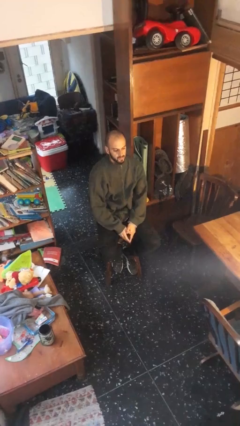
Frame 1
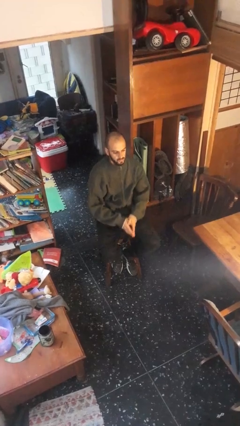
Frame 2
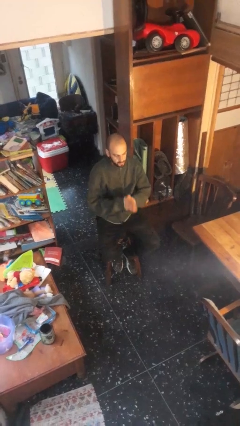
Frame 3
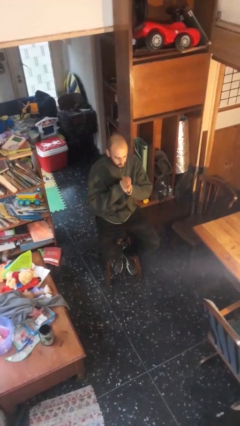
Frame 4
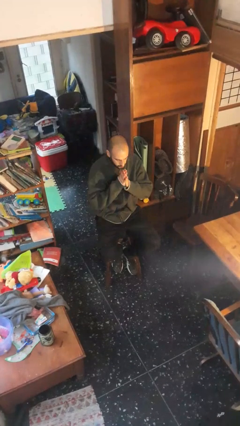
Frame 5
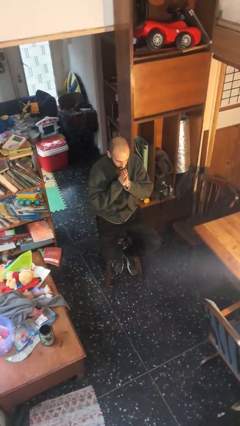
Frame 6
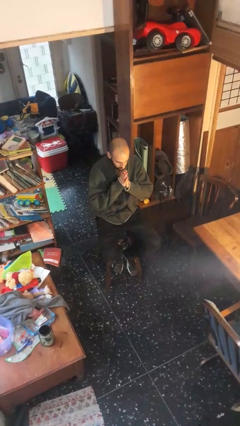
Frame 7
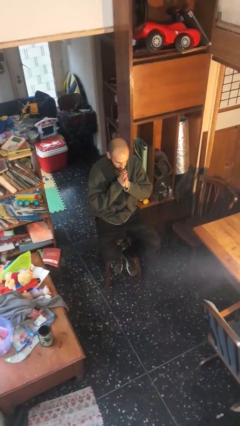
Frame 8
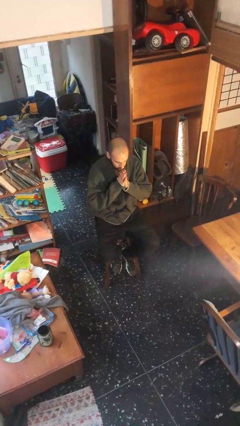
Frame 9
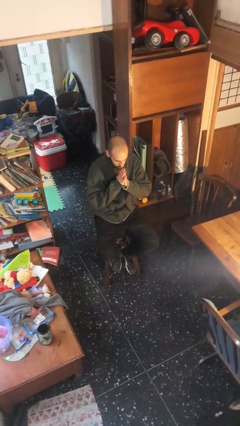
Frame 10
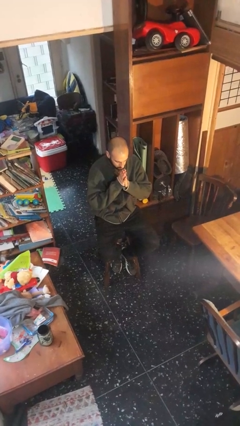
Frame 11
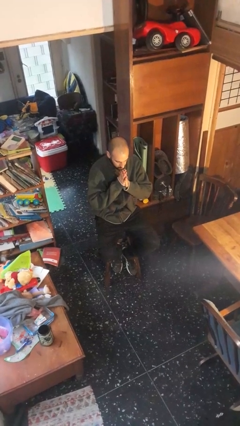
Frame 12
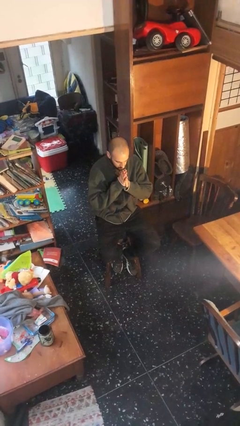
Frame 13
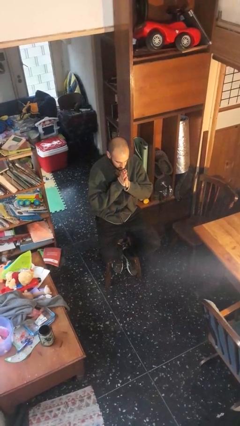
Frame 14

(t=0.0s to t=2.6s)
person prays

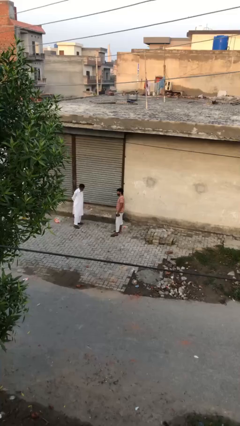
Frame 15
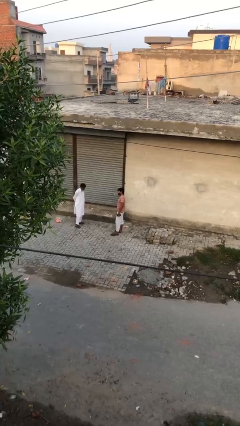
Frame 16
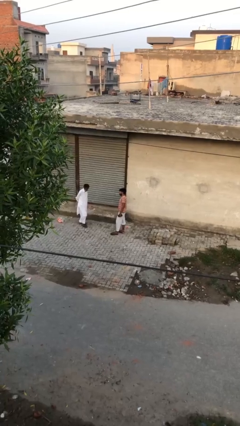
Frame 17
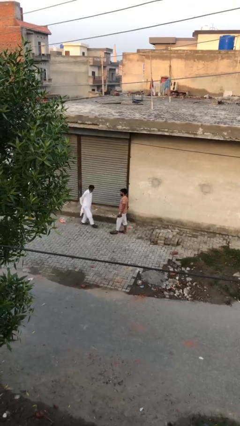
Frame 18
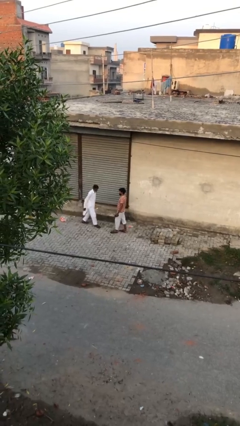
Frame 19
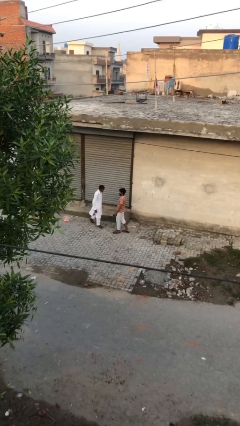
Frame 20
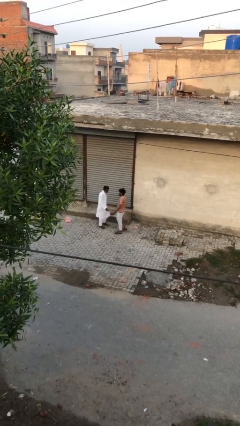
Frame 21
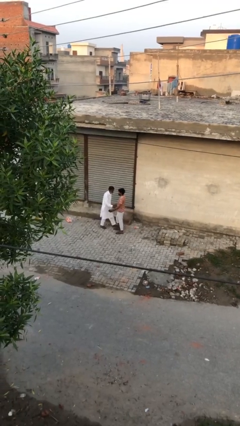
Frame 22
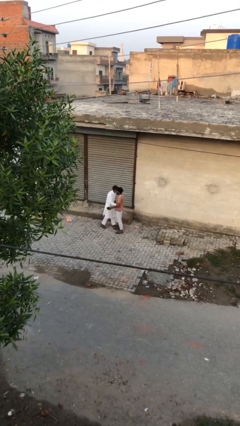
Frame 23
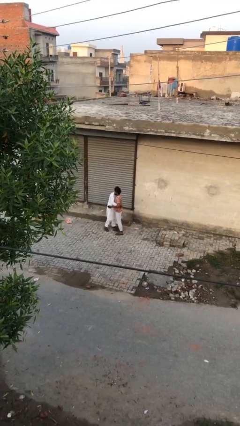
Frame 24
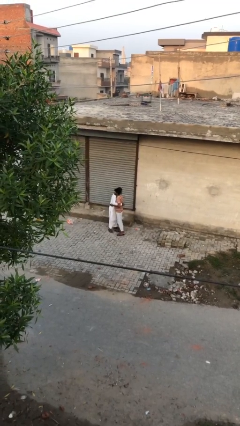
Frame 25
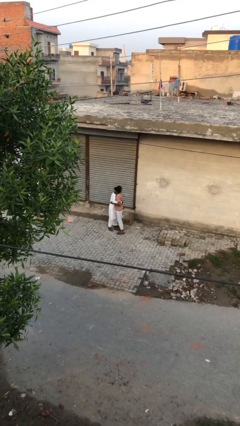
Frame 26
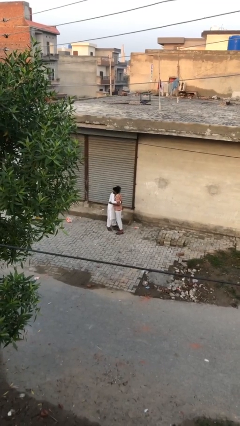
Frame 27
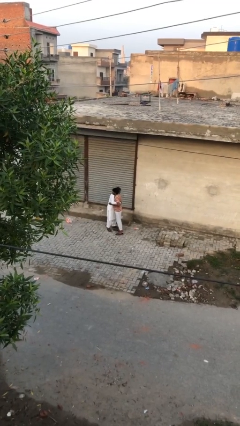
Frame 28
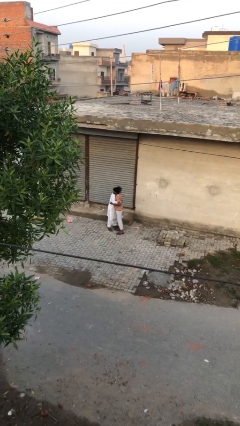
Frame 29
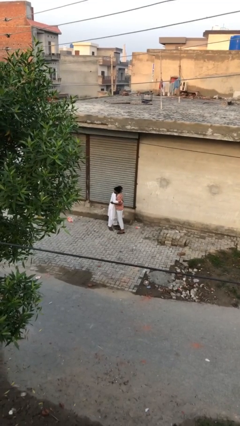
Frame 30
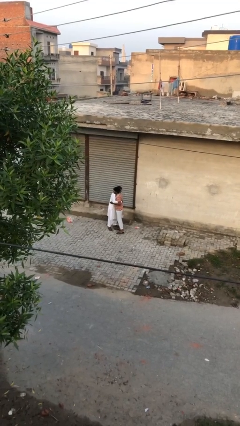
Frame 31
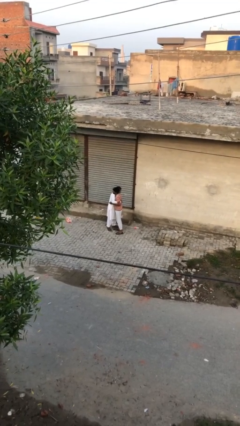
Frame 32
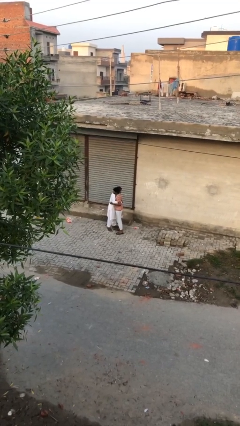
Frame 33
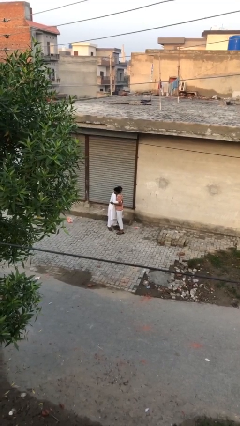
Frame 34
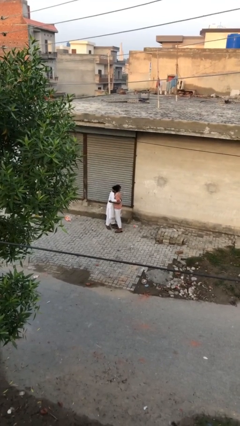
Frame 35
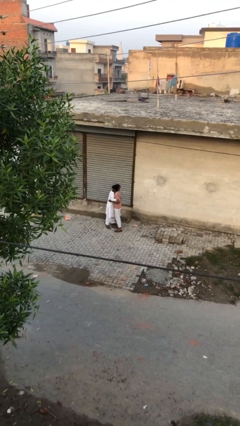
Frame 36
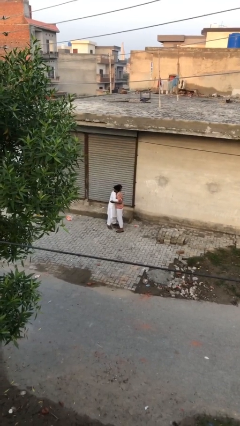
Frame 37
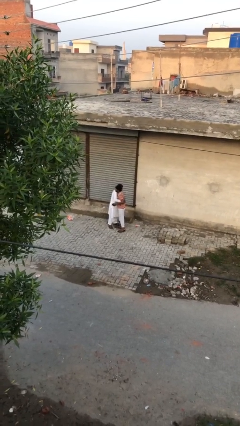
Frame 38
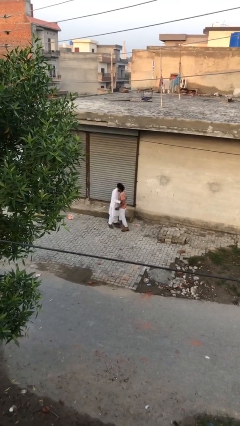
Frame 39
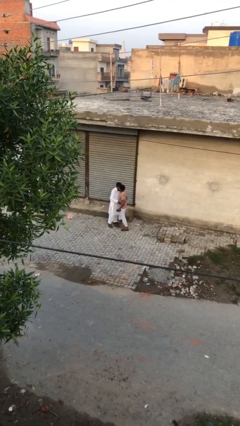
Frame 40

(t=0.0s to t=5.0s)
person embraces person

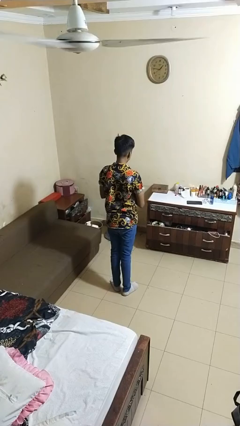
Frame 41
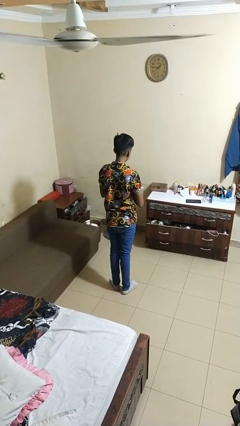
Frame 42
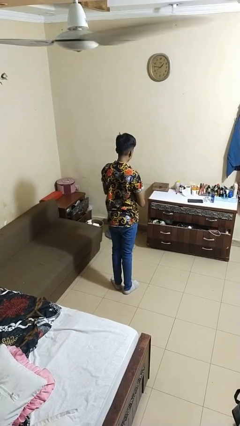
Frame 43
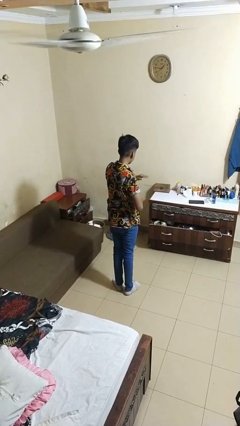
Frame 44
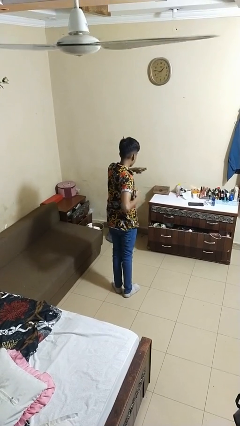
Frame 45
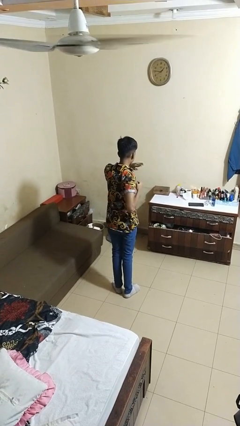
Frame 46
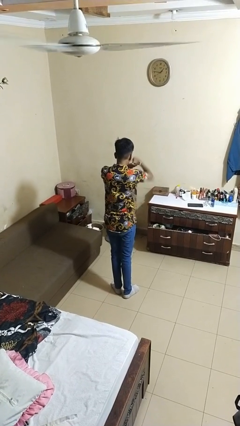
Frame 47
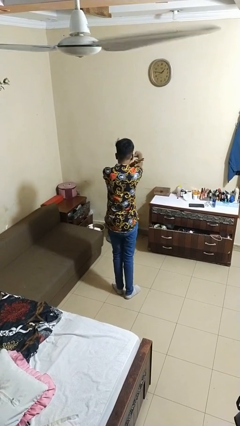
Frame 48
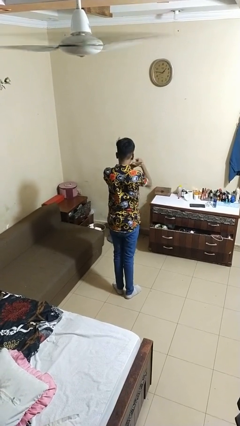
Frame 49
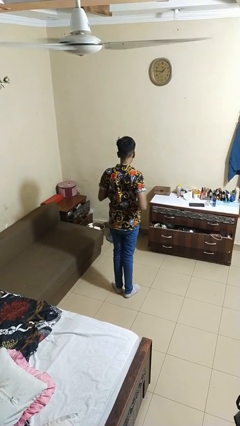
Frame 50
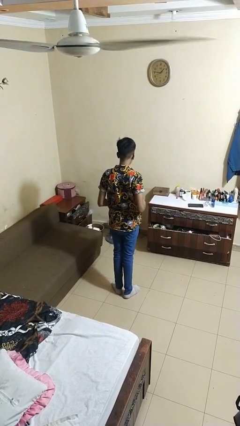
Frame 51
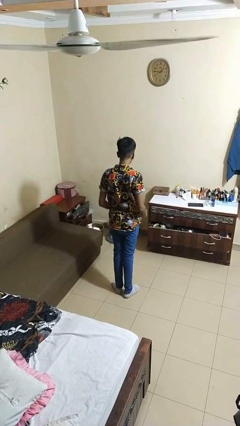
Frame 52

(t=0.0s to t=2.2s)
person karate chop

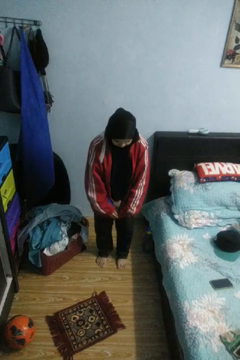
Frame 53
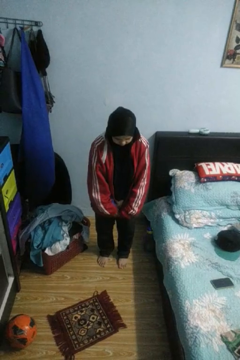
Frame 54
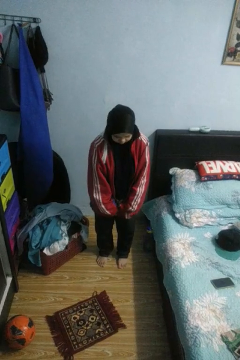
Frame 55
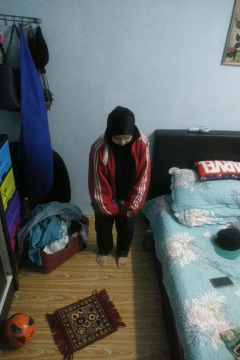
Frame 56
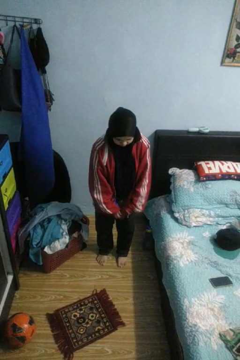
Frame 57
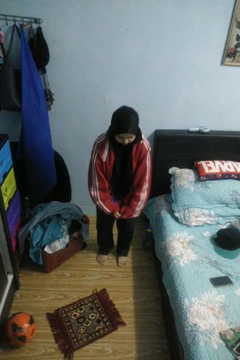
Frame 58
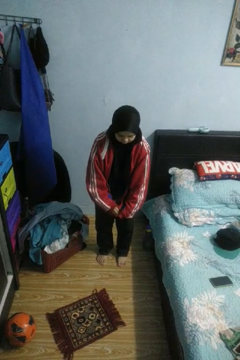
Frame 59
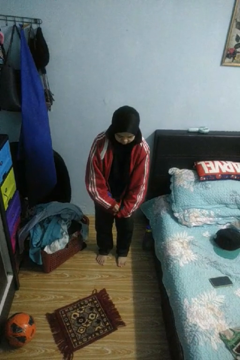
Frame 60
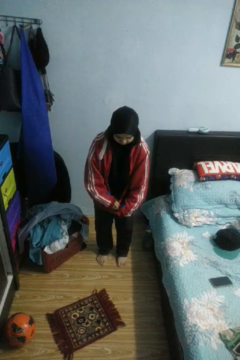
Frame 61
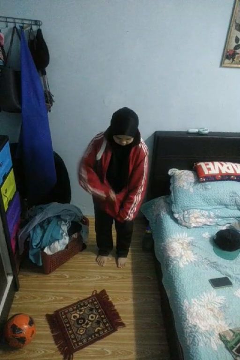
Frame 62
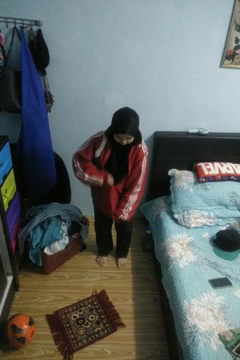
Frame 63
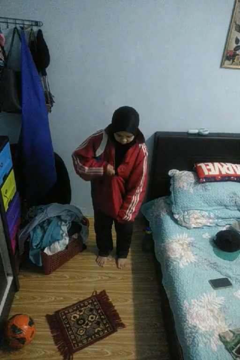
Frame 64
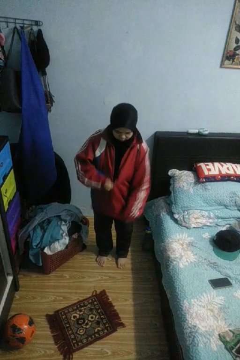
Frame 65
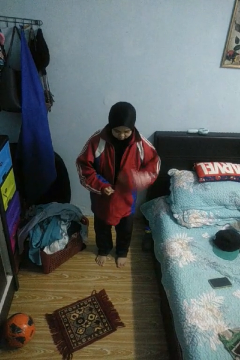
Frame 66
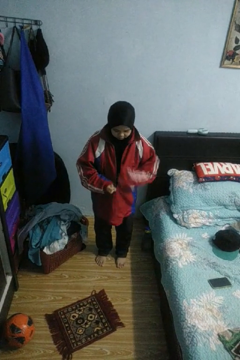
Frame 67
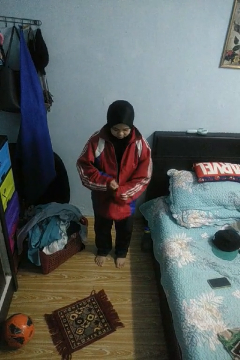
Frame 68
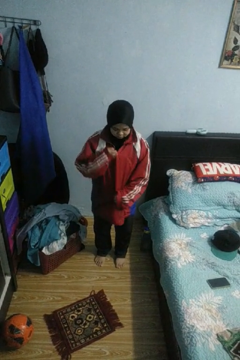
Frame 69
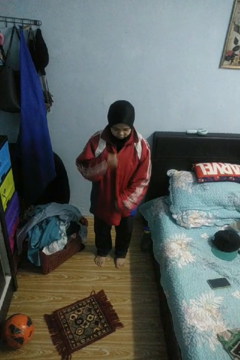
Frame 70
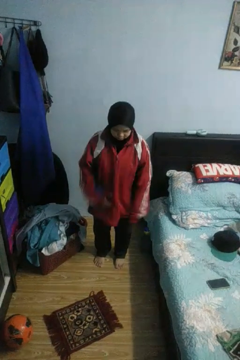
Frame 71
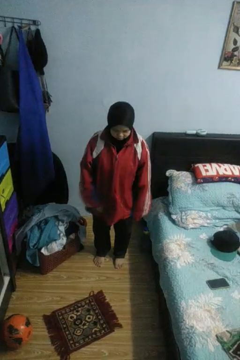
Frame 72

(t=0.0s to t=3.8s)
person zips up jacket

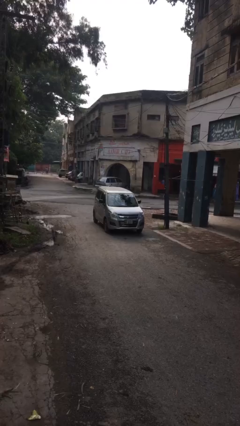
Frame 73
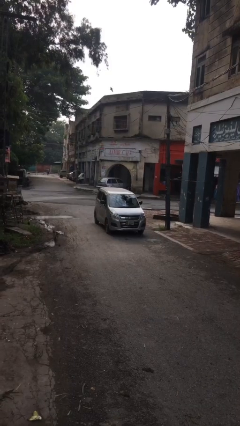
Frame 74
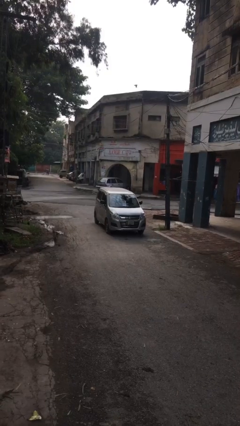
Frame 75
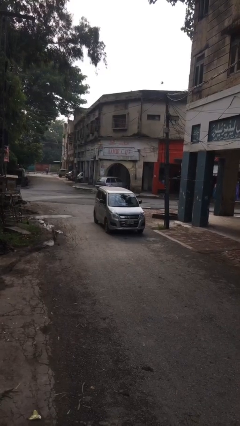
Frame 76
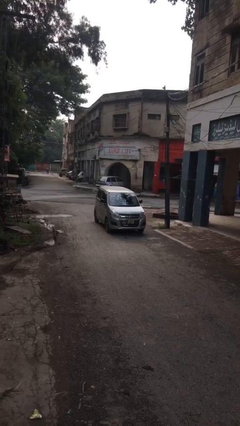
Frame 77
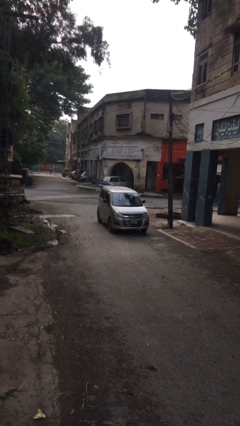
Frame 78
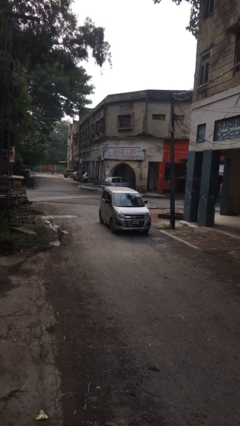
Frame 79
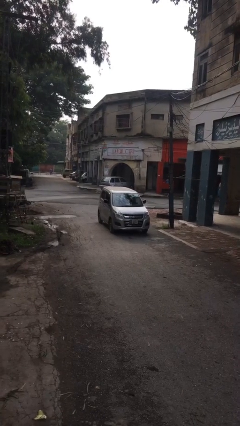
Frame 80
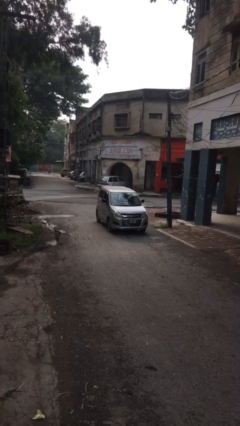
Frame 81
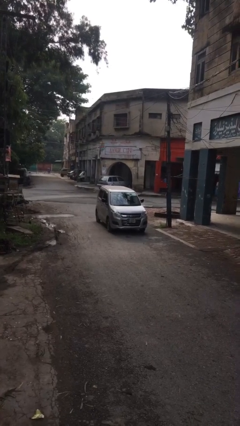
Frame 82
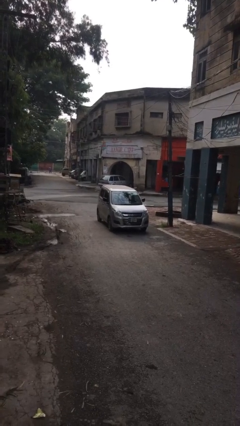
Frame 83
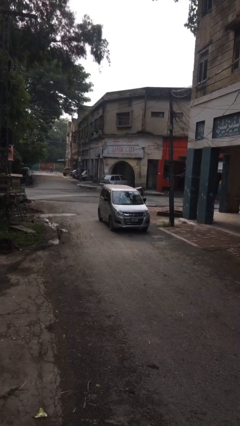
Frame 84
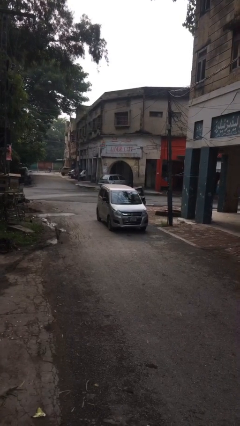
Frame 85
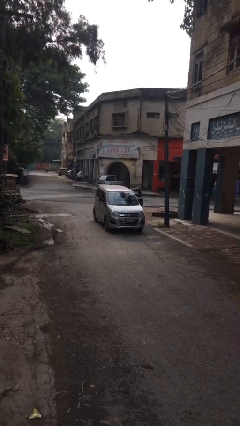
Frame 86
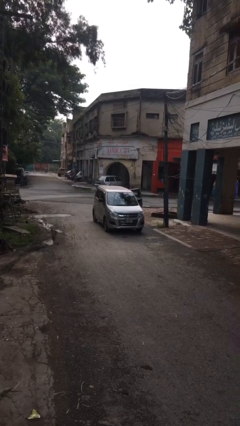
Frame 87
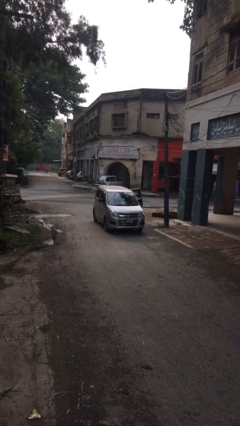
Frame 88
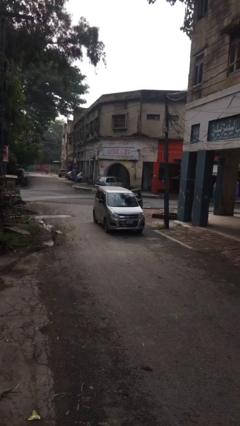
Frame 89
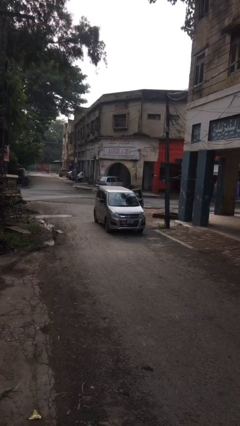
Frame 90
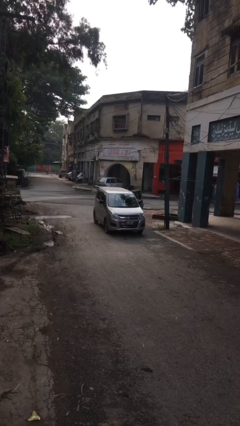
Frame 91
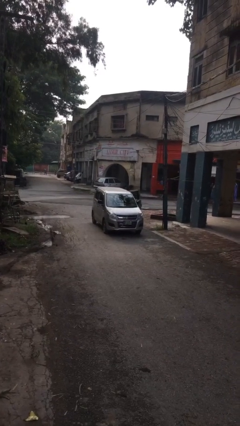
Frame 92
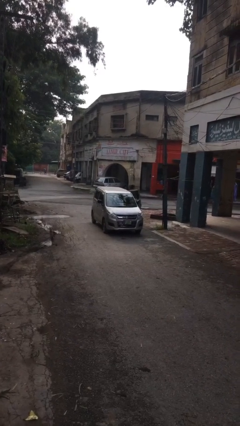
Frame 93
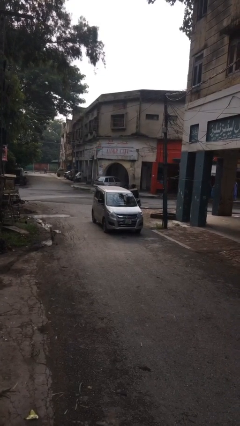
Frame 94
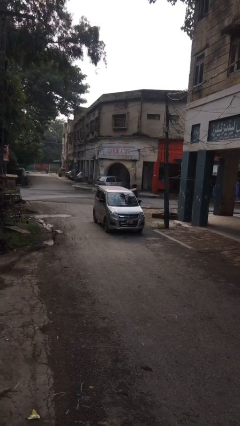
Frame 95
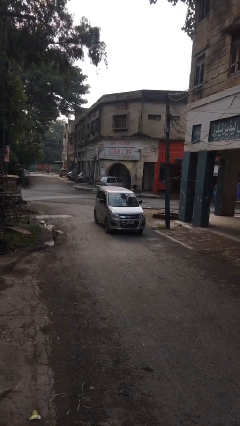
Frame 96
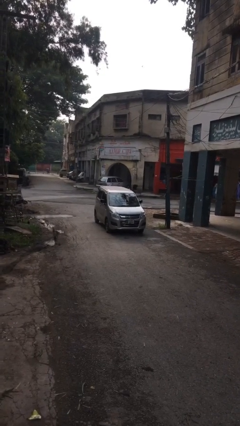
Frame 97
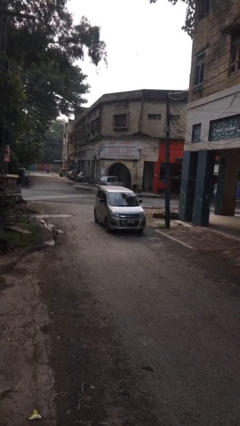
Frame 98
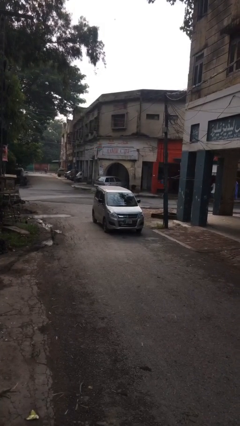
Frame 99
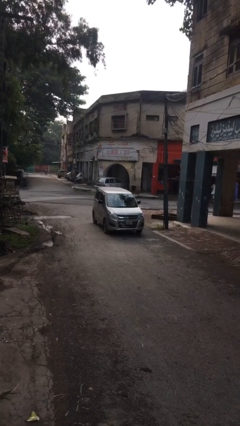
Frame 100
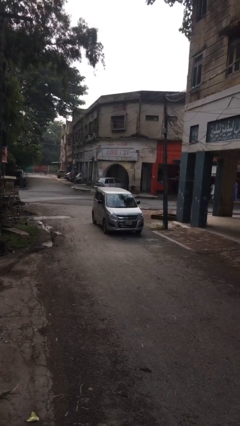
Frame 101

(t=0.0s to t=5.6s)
car drops off person
